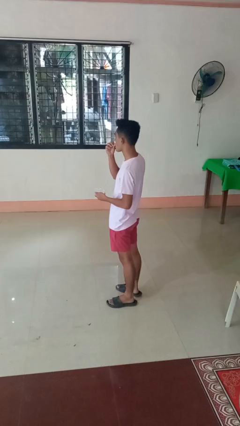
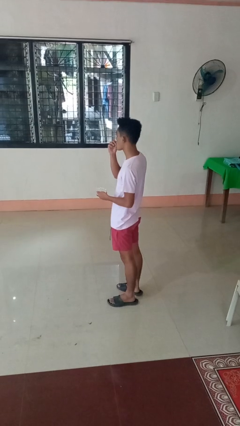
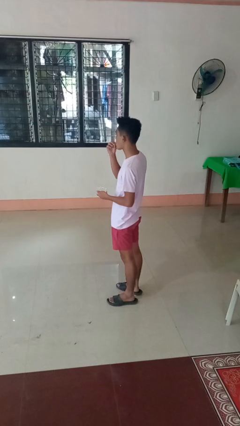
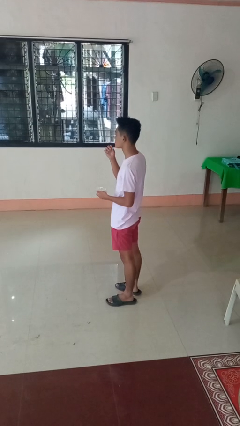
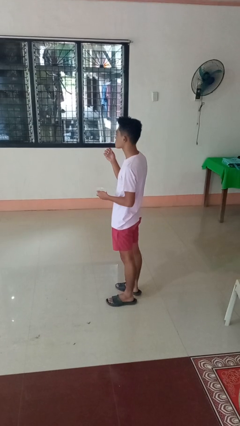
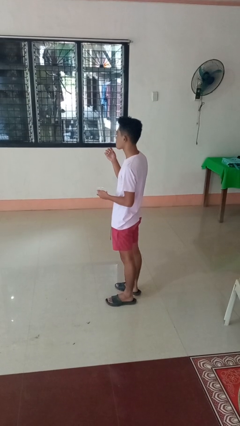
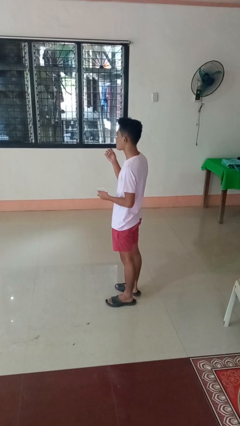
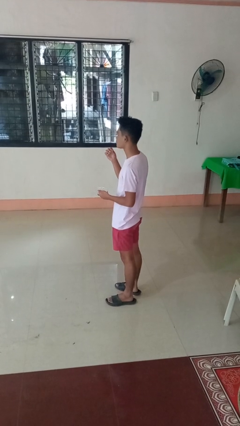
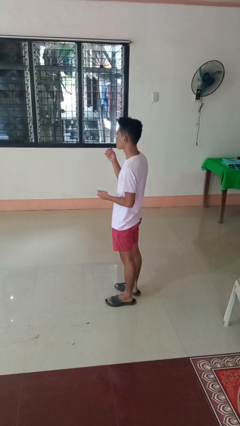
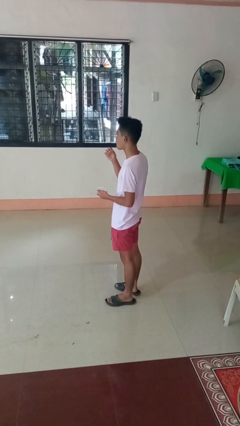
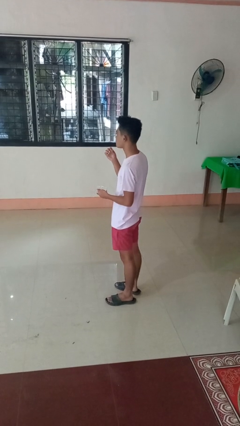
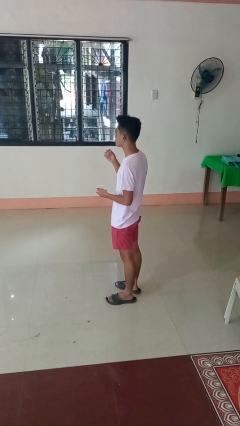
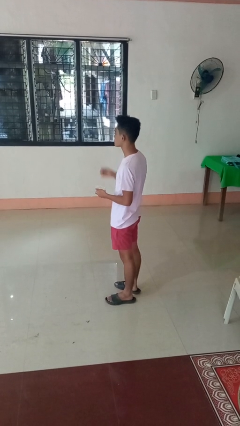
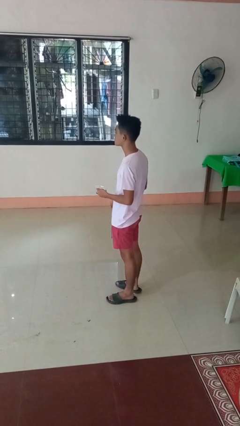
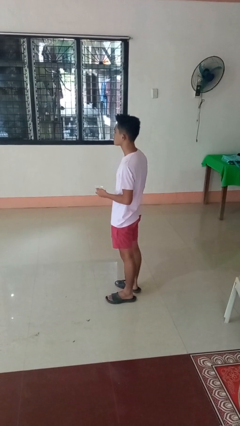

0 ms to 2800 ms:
person eats snack from bag

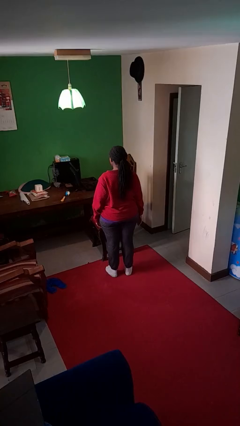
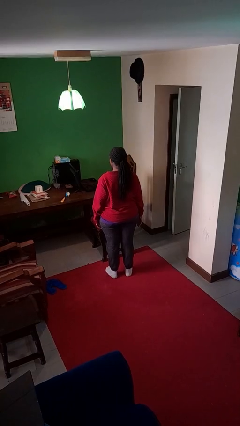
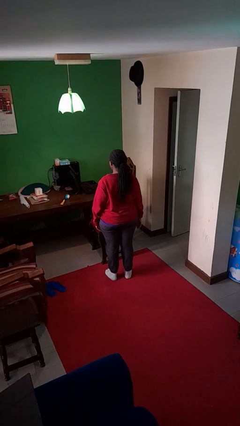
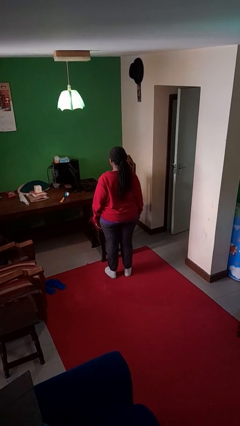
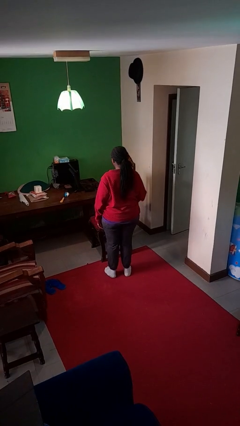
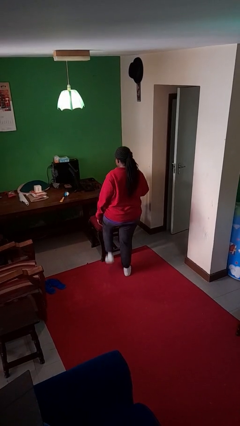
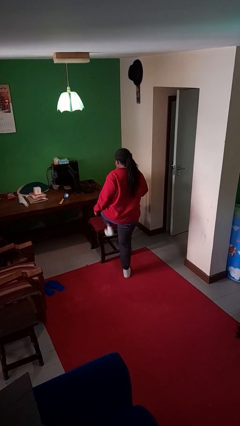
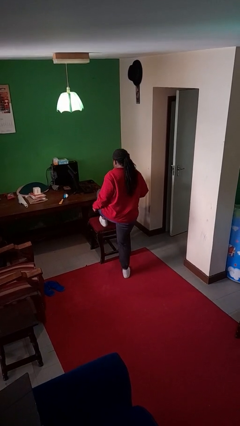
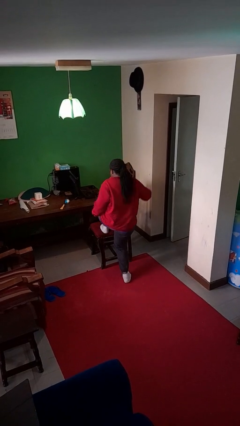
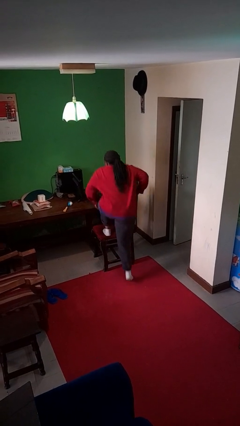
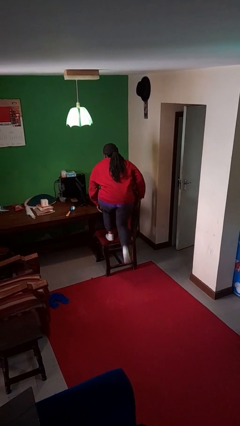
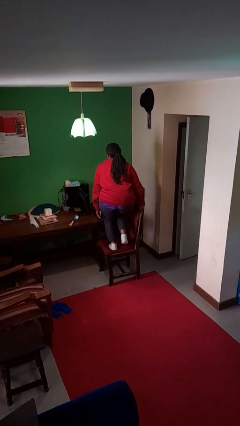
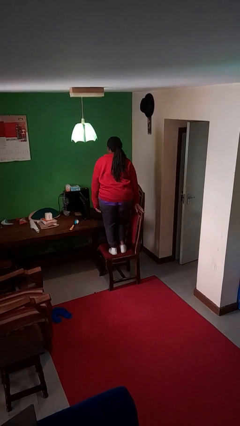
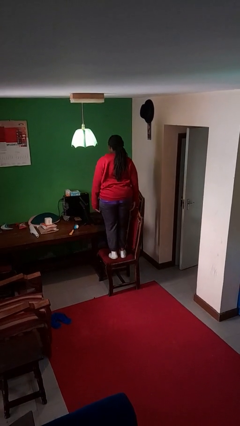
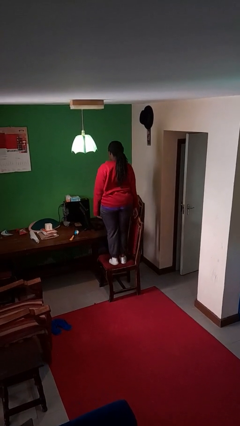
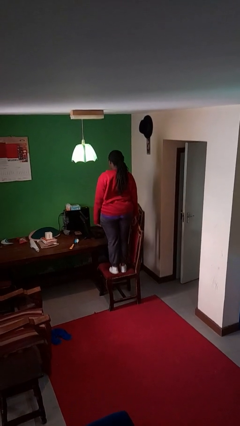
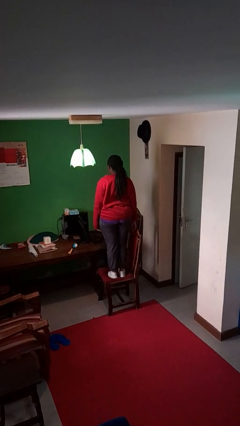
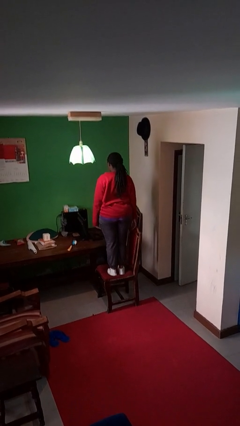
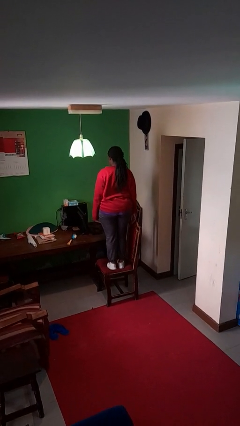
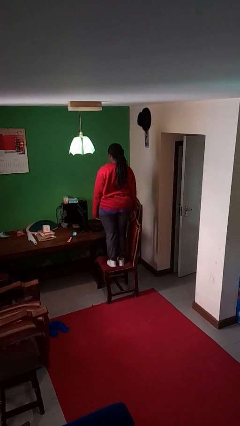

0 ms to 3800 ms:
person climbs on chair

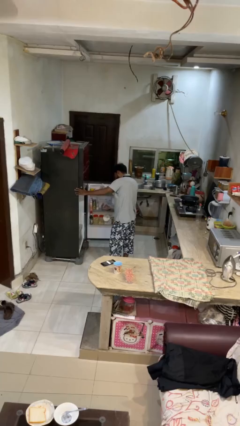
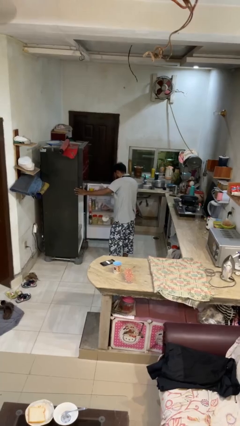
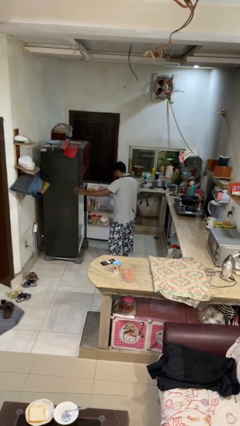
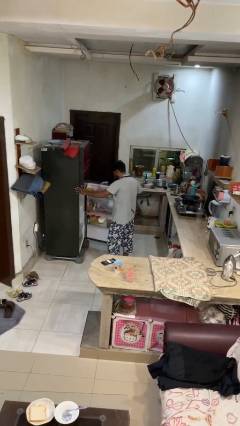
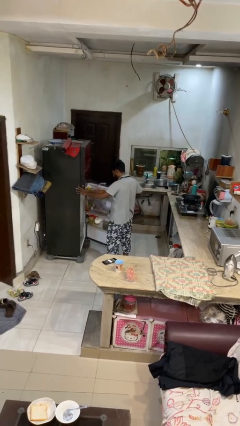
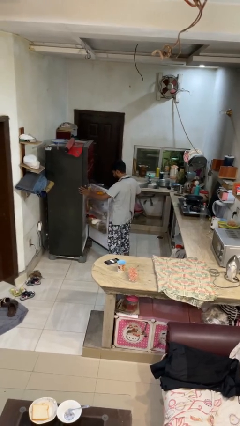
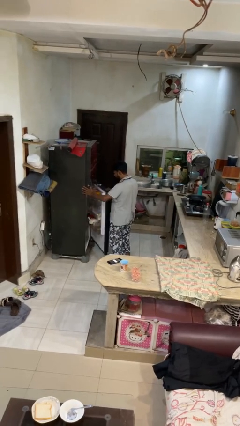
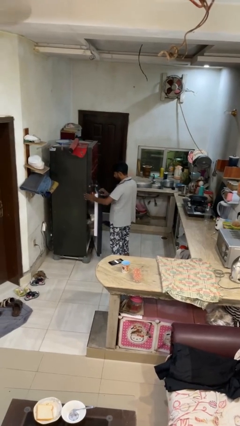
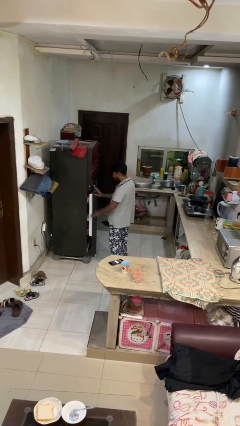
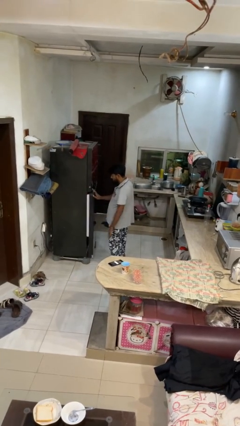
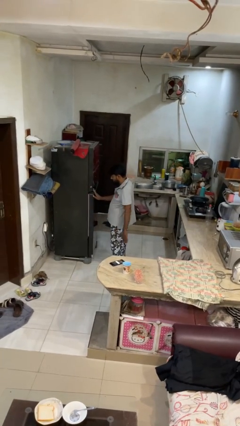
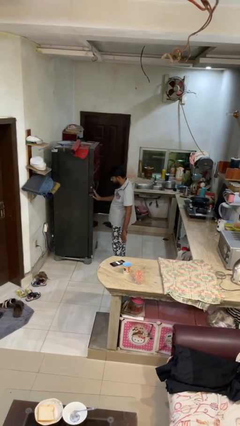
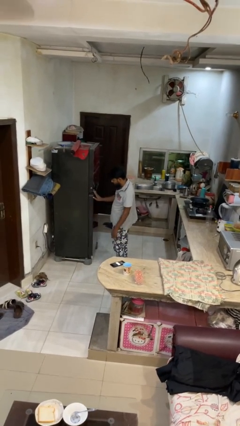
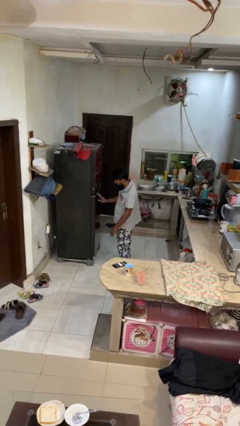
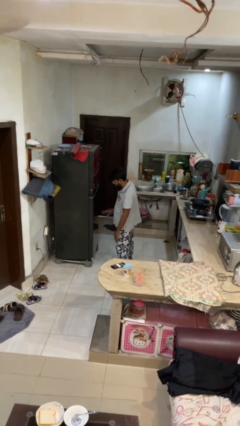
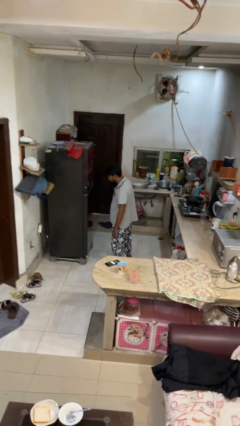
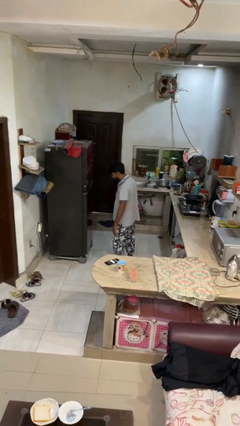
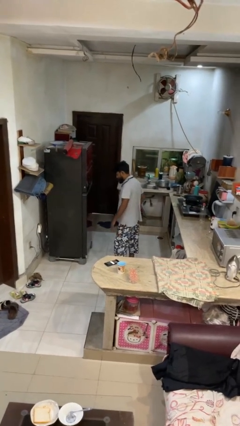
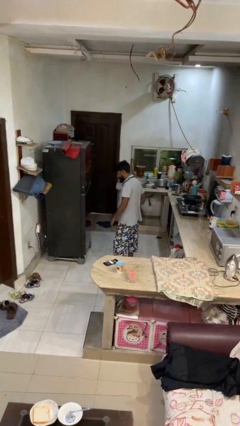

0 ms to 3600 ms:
person closes refrigerator

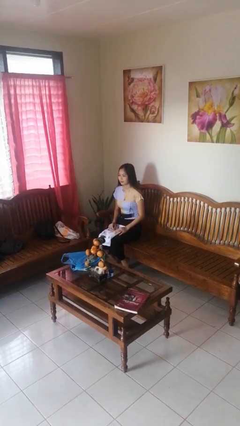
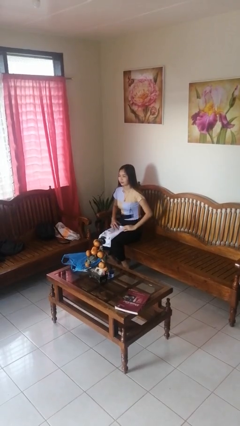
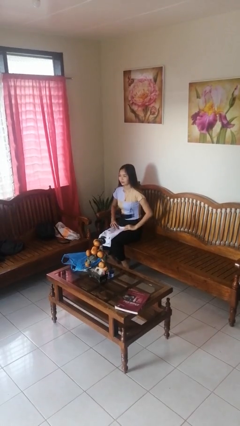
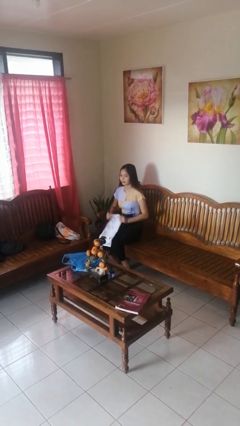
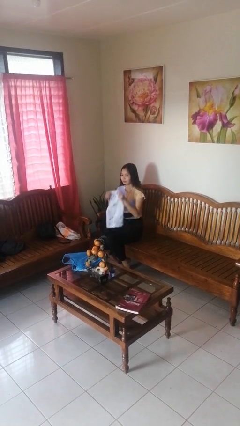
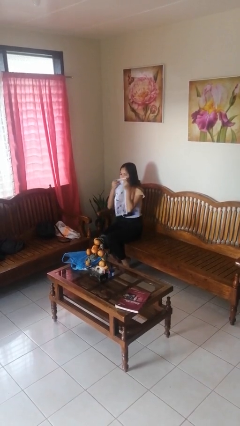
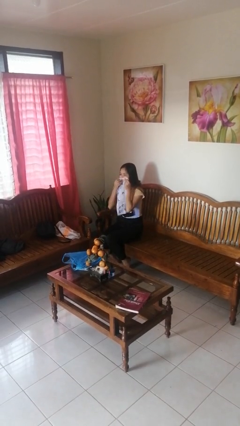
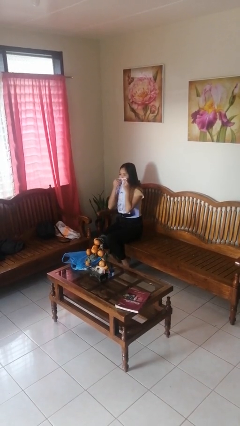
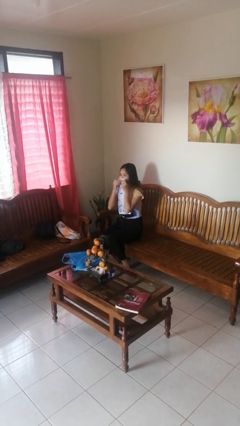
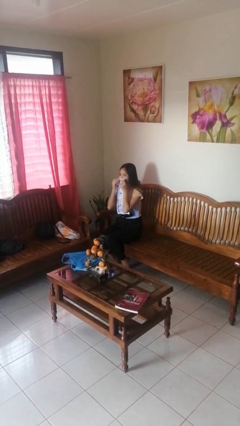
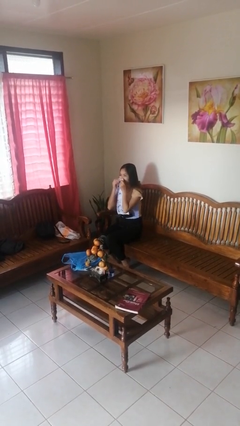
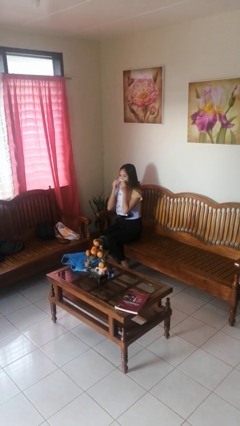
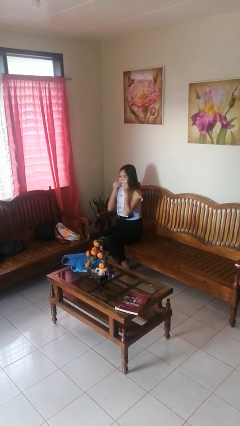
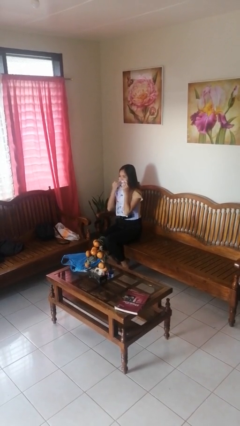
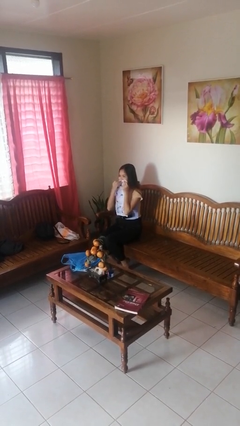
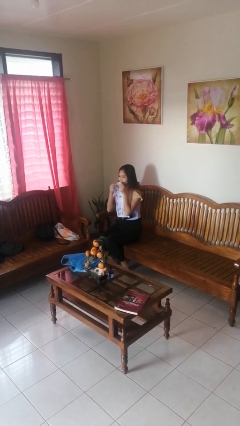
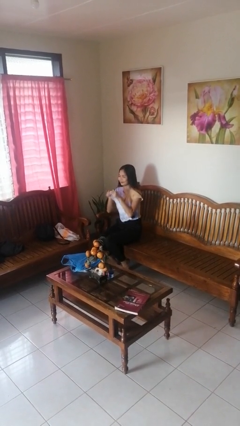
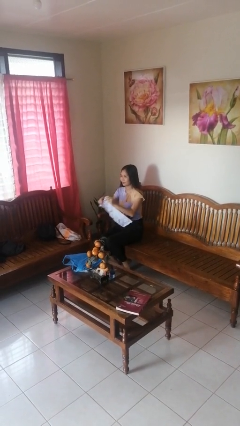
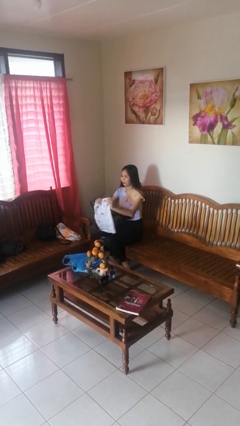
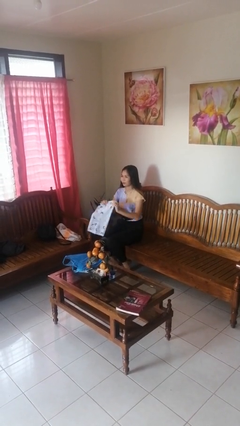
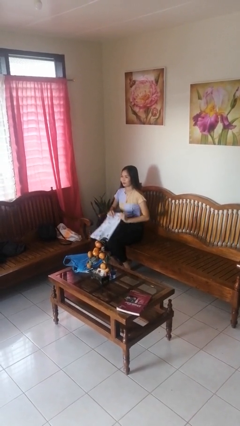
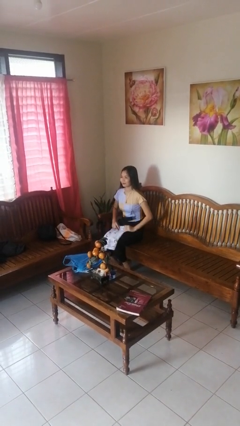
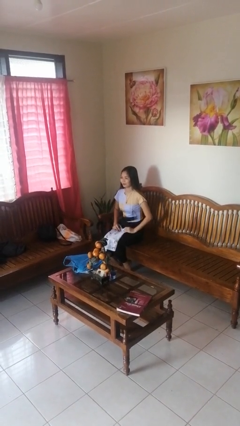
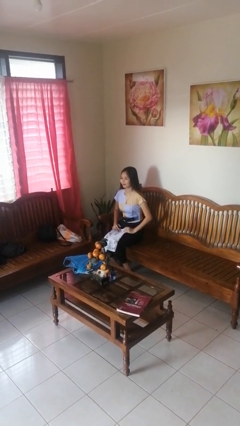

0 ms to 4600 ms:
person wipes mouth with napkin

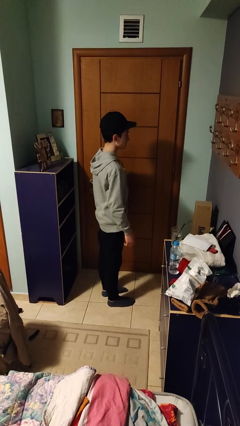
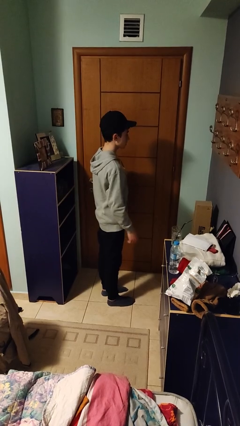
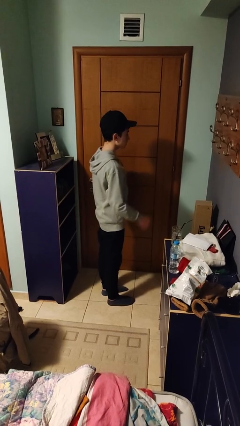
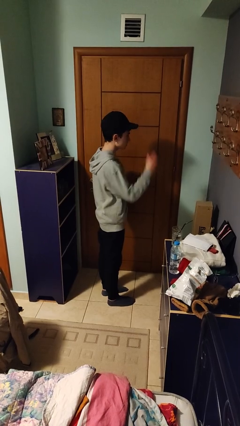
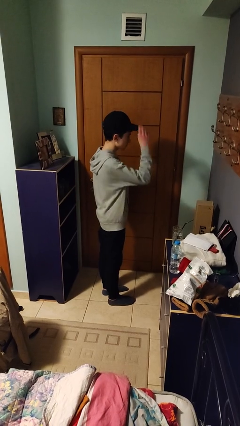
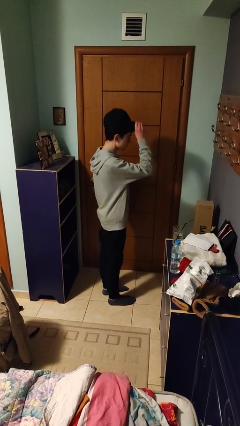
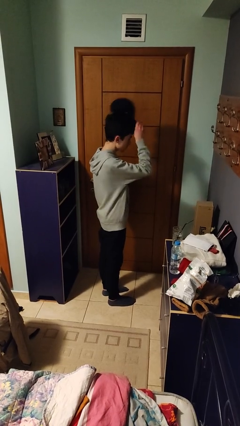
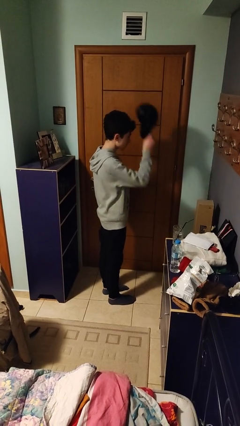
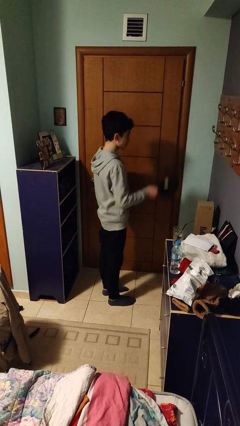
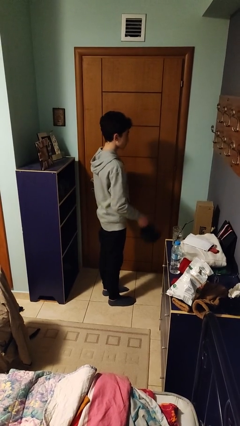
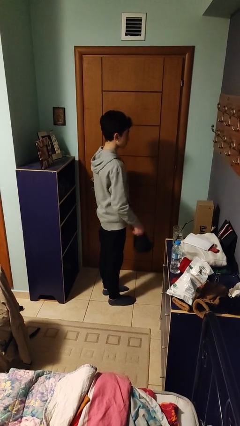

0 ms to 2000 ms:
person takes off hat

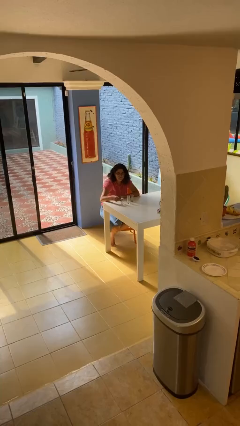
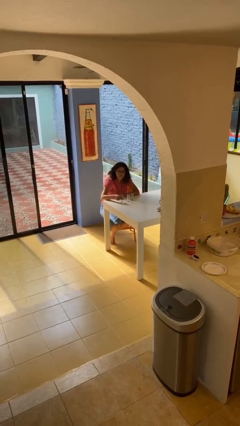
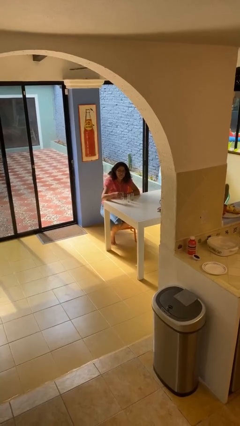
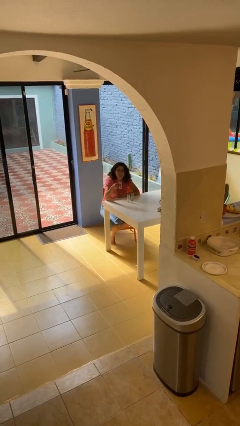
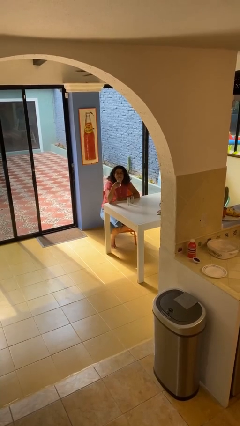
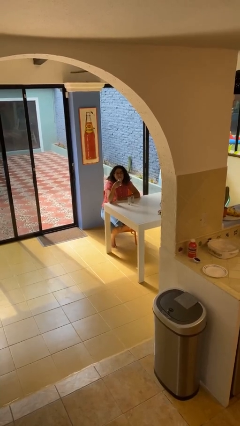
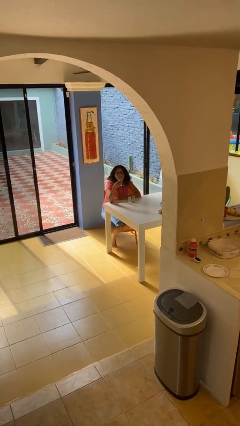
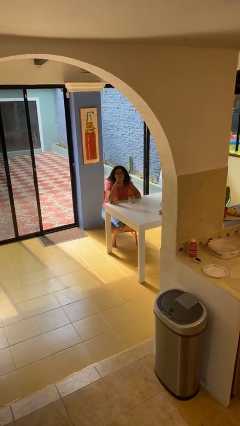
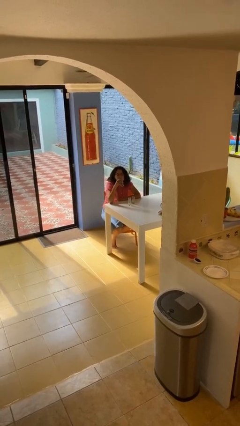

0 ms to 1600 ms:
person picks up object from table
